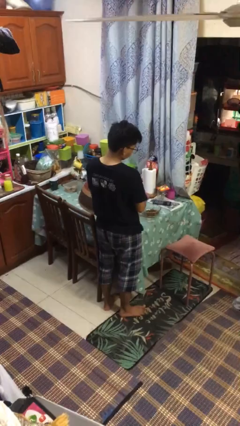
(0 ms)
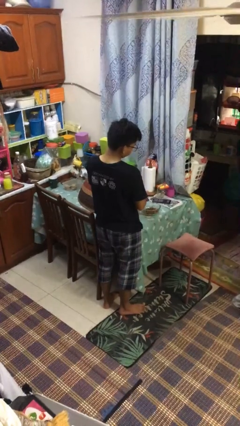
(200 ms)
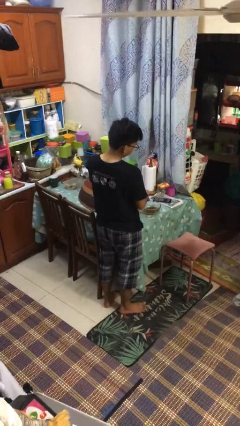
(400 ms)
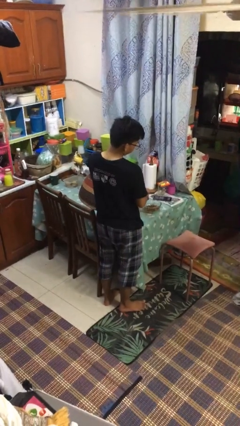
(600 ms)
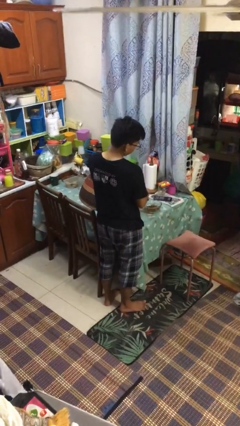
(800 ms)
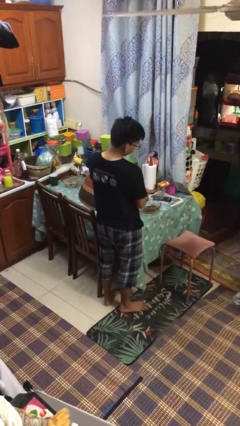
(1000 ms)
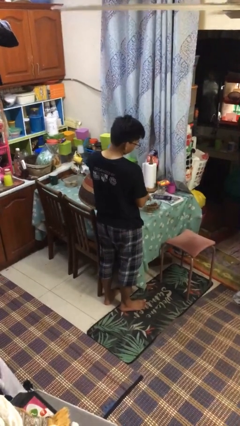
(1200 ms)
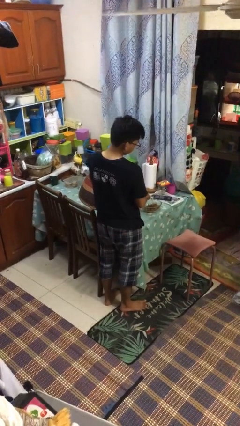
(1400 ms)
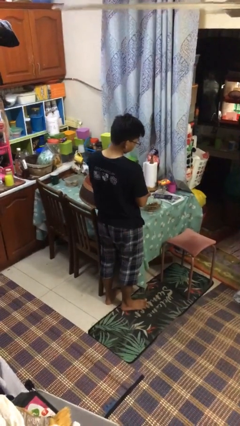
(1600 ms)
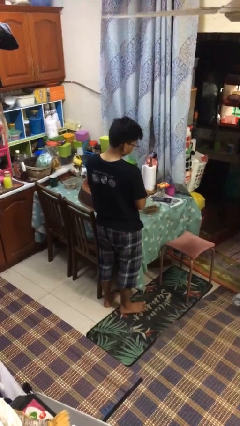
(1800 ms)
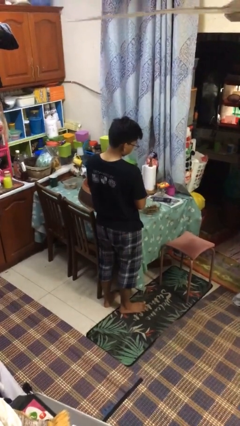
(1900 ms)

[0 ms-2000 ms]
person pours into bowl

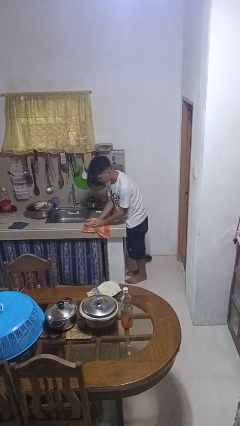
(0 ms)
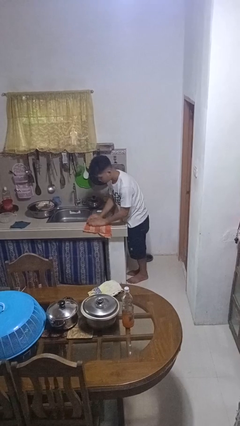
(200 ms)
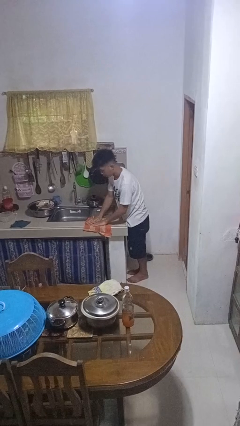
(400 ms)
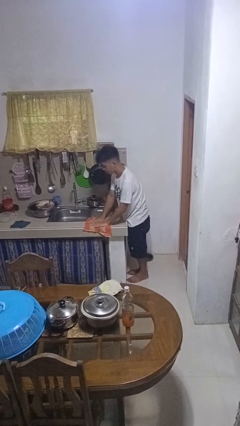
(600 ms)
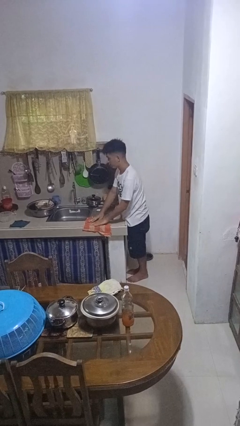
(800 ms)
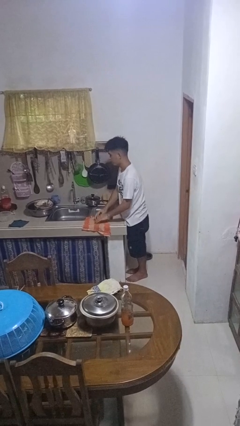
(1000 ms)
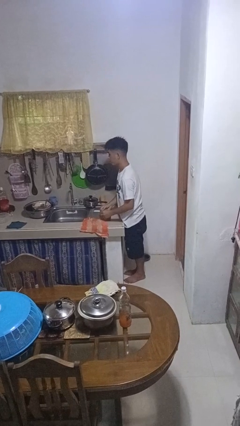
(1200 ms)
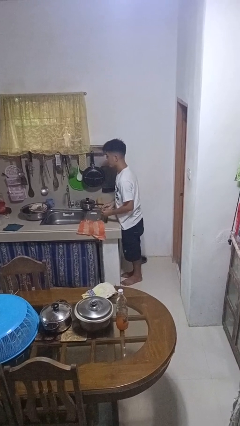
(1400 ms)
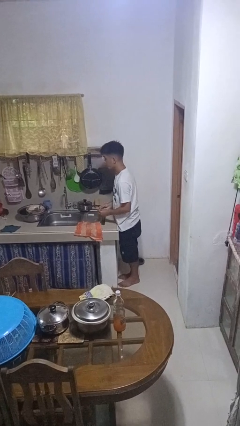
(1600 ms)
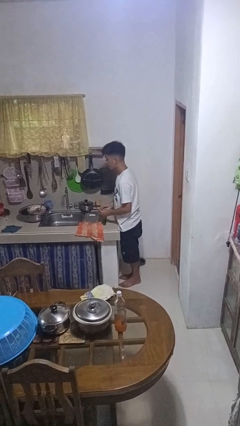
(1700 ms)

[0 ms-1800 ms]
person dries hands with towel

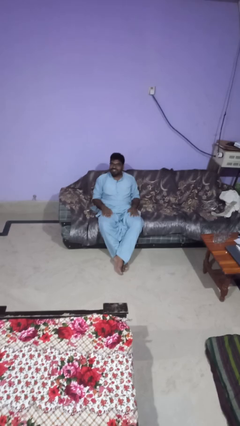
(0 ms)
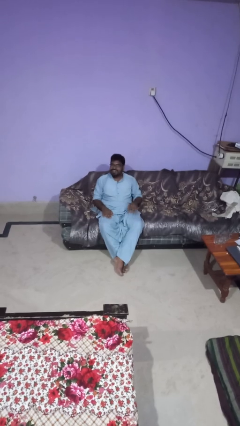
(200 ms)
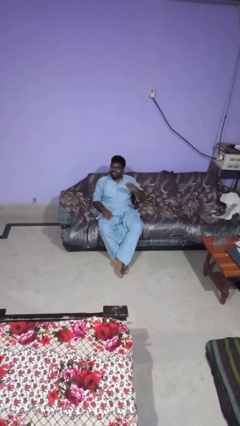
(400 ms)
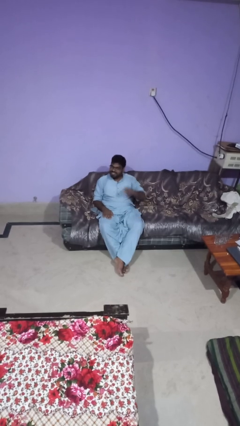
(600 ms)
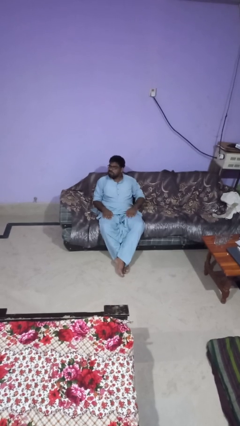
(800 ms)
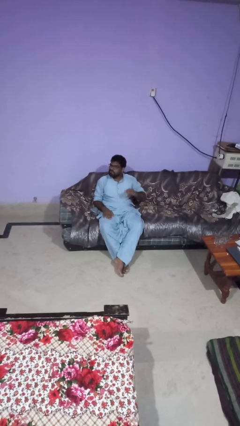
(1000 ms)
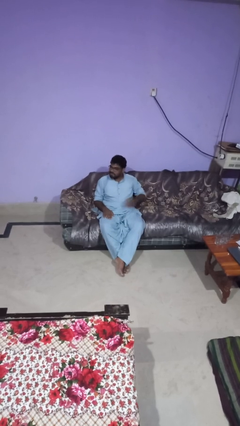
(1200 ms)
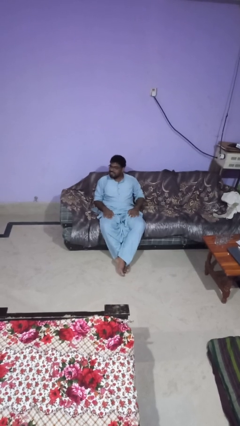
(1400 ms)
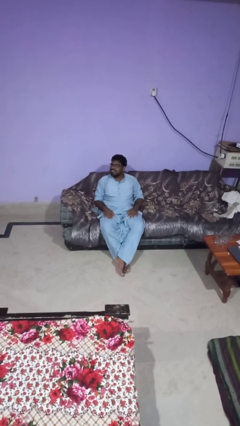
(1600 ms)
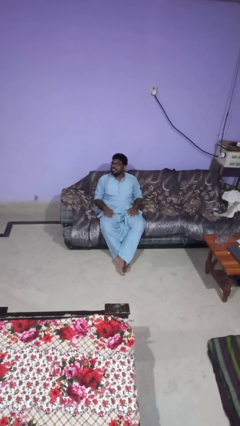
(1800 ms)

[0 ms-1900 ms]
person slaps hands on thighs

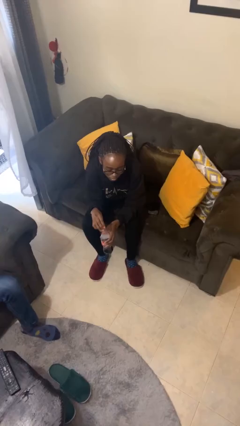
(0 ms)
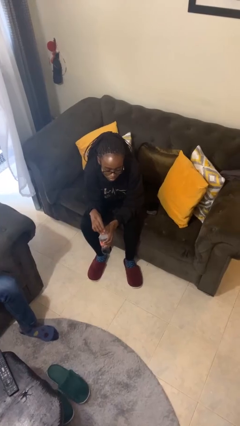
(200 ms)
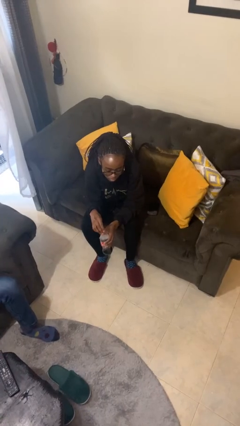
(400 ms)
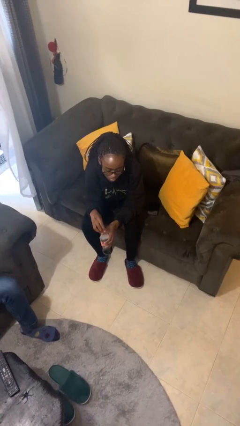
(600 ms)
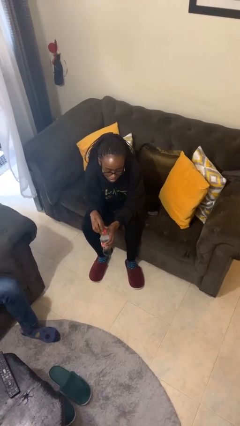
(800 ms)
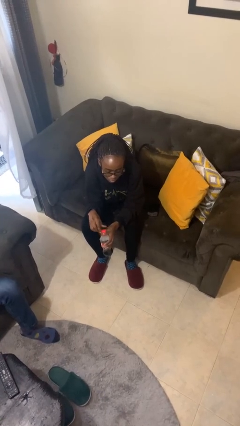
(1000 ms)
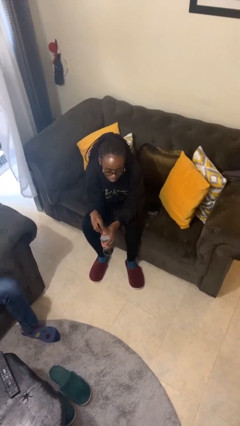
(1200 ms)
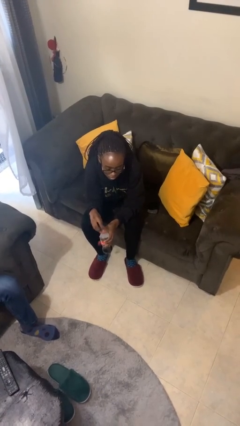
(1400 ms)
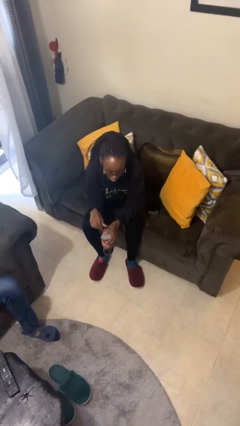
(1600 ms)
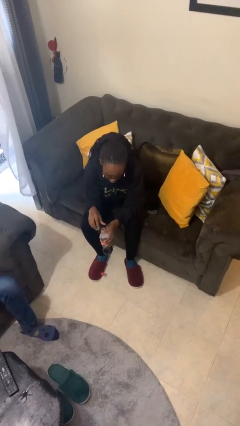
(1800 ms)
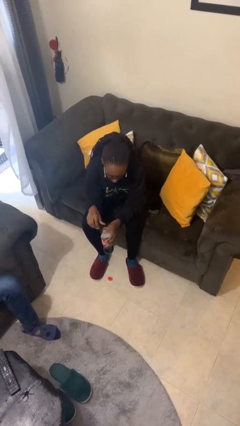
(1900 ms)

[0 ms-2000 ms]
person screws lid to bottle

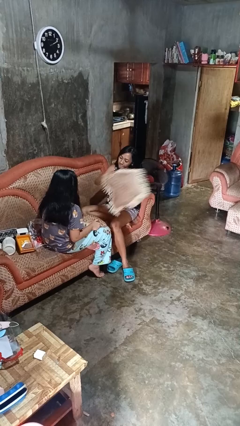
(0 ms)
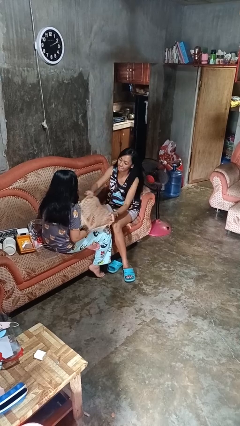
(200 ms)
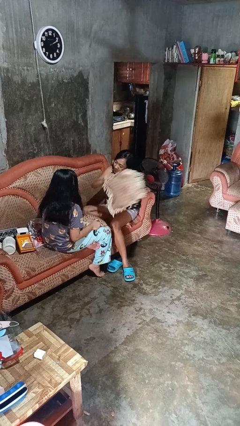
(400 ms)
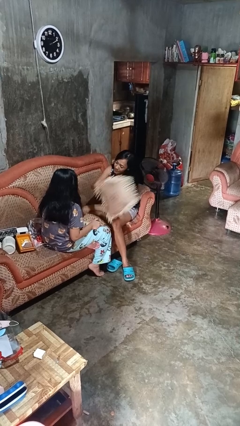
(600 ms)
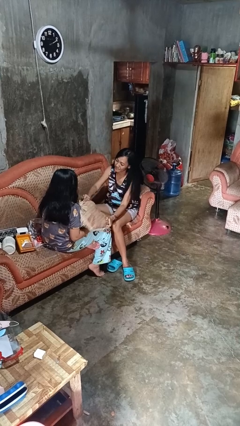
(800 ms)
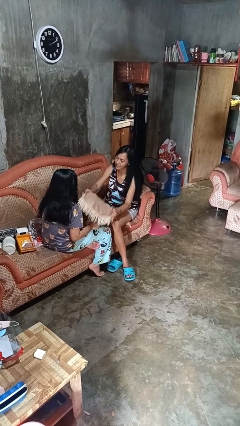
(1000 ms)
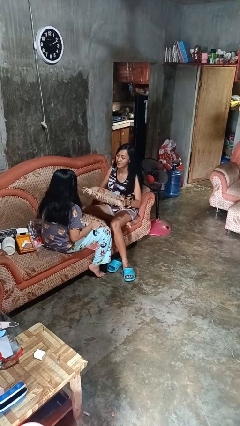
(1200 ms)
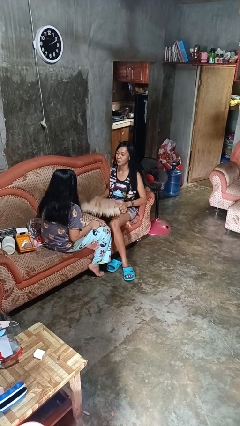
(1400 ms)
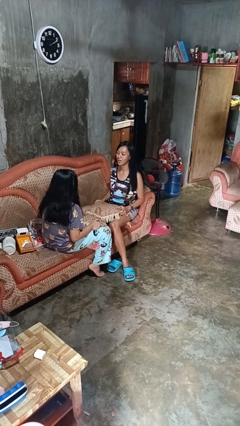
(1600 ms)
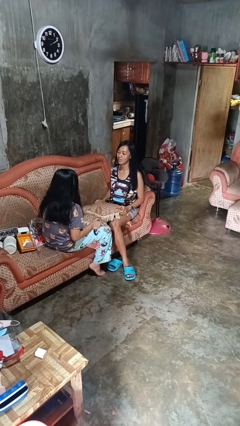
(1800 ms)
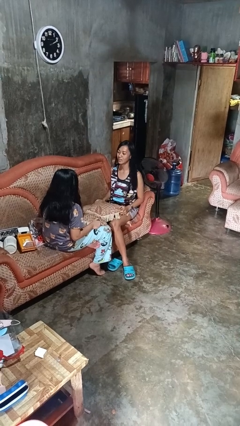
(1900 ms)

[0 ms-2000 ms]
person hits person with pillow

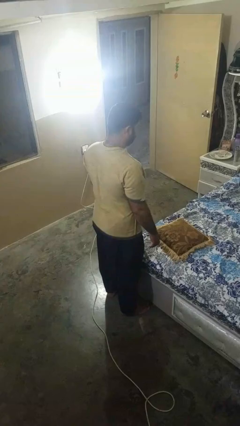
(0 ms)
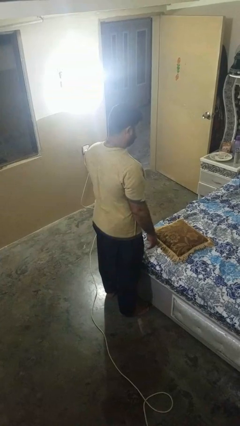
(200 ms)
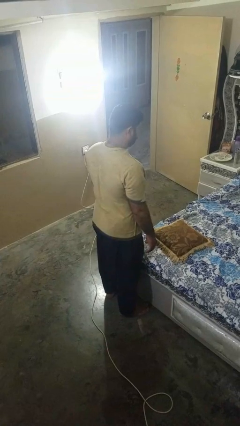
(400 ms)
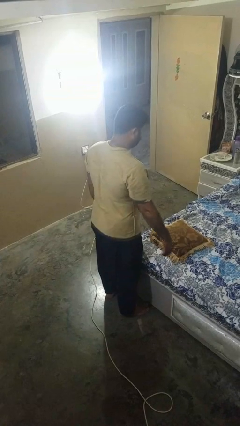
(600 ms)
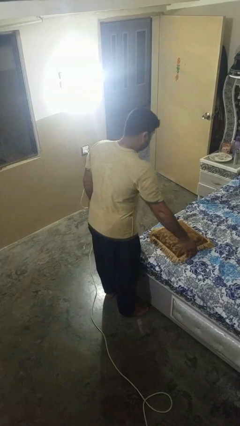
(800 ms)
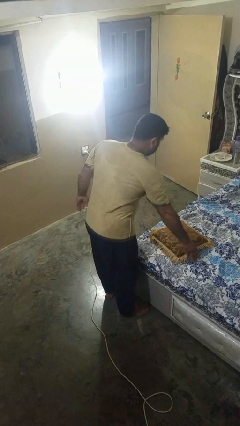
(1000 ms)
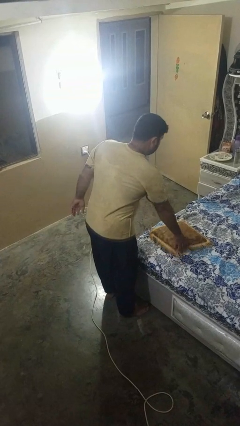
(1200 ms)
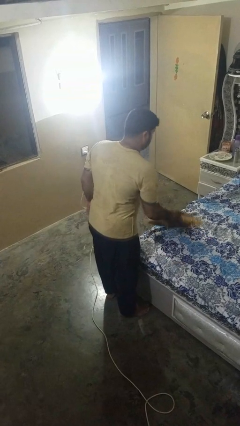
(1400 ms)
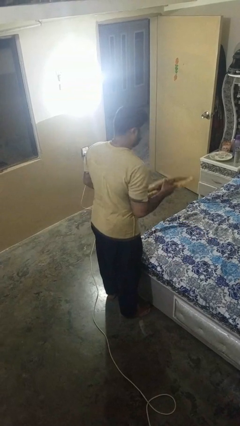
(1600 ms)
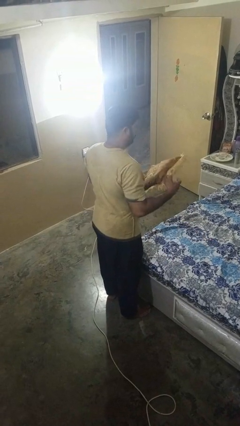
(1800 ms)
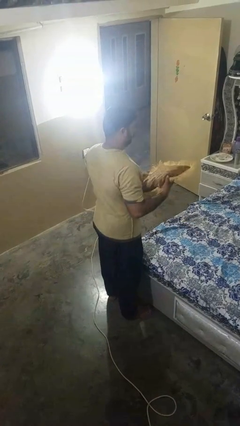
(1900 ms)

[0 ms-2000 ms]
person picks up object from bed

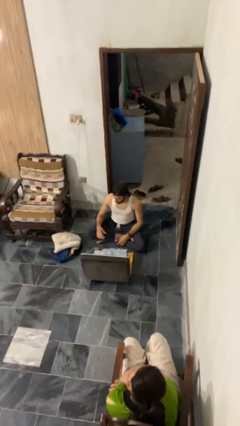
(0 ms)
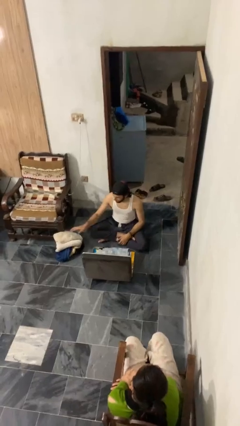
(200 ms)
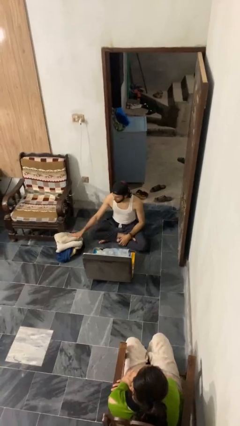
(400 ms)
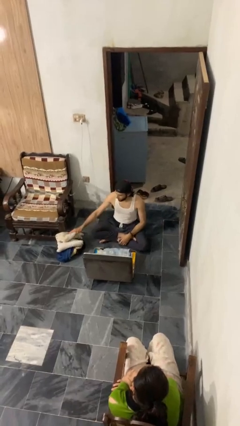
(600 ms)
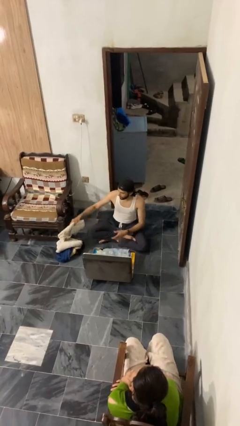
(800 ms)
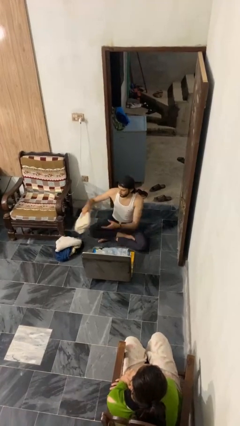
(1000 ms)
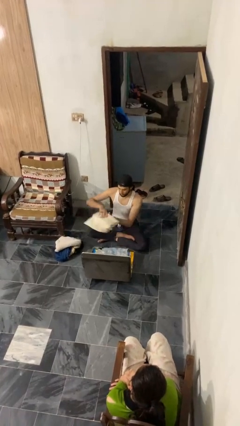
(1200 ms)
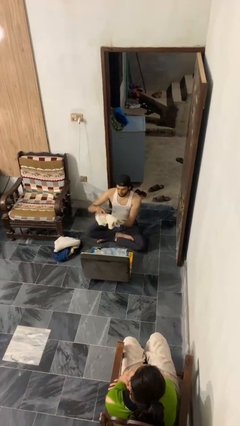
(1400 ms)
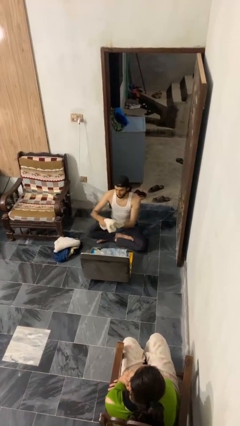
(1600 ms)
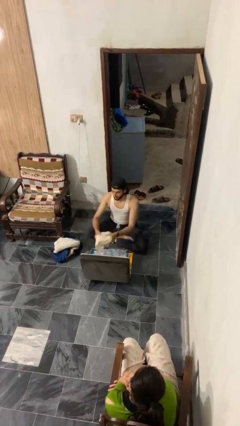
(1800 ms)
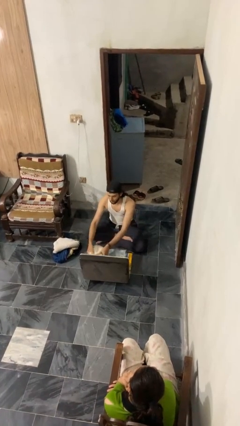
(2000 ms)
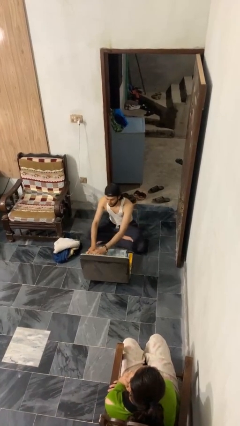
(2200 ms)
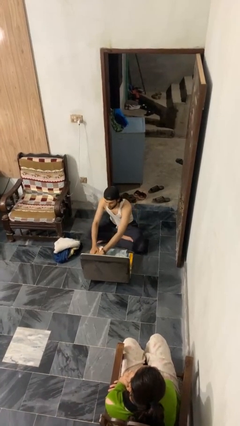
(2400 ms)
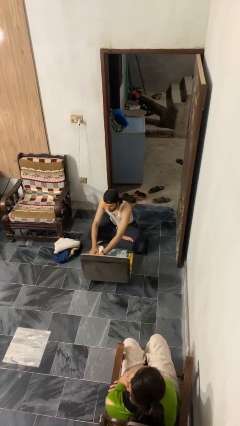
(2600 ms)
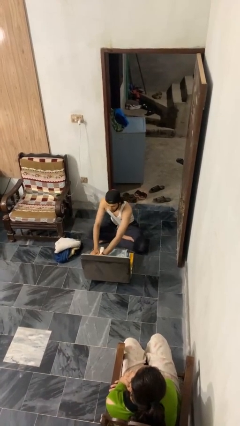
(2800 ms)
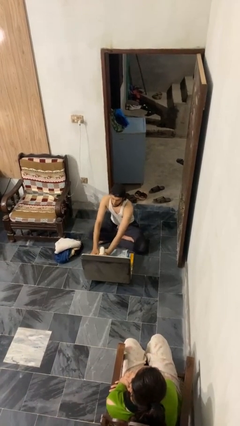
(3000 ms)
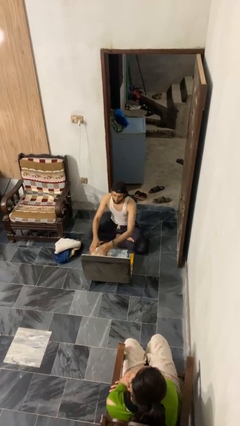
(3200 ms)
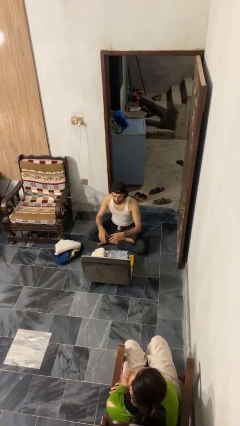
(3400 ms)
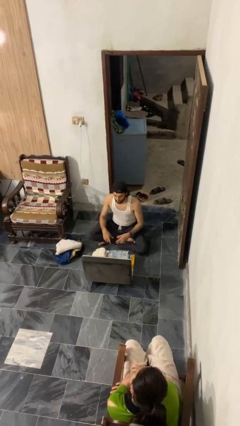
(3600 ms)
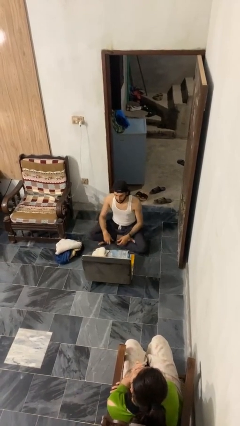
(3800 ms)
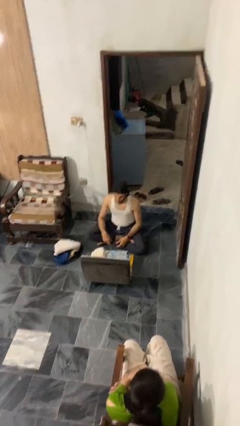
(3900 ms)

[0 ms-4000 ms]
person loads clothes into suitcase

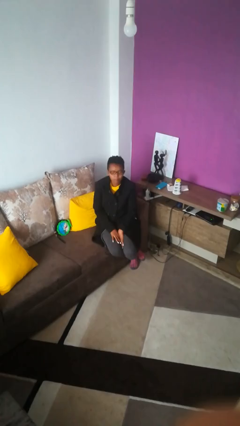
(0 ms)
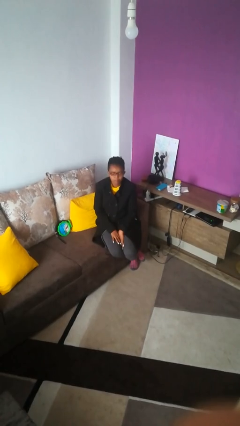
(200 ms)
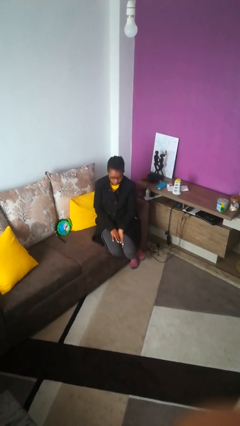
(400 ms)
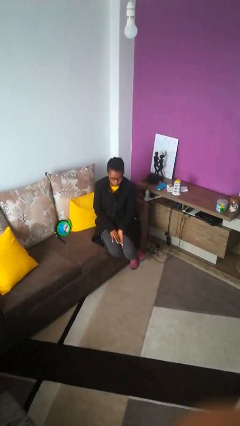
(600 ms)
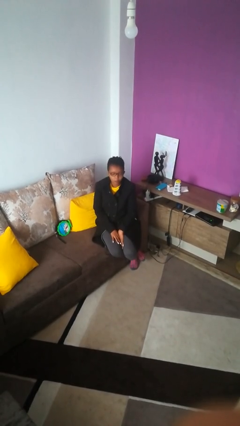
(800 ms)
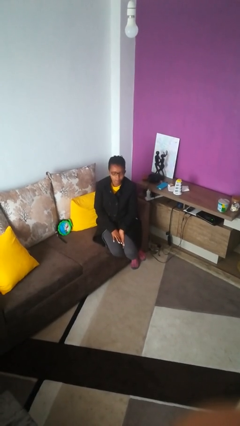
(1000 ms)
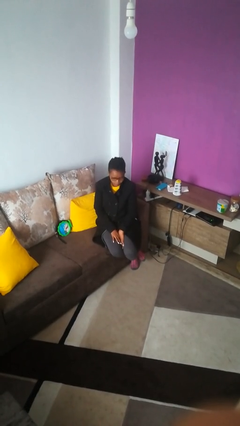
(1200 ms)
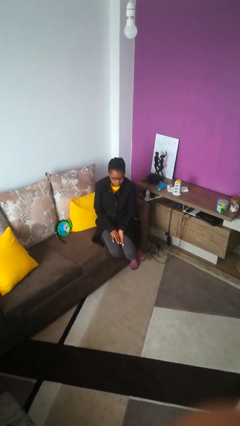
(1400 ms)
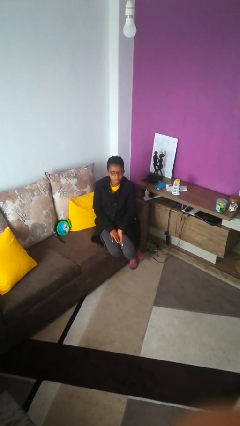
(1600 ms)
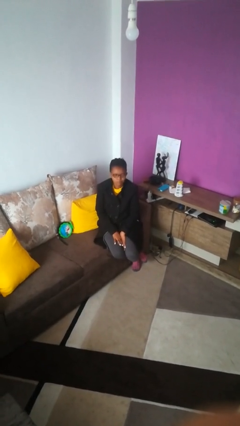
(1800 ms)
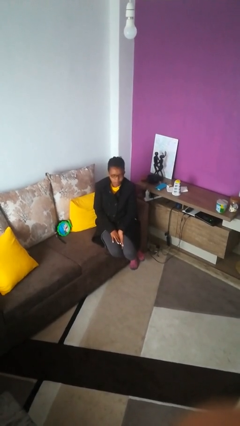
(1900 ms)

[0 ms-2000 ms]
person nods head
